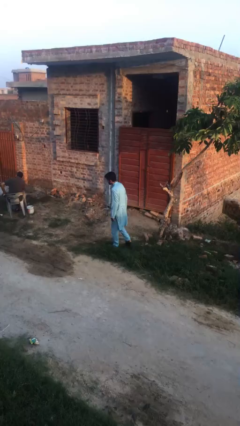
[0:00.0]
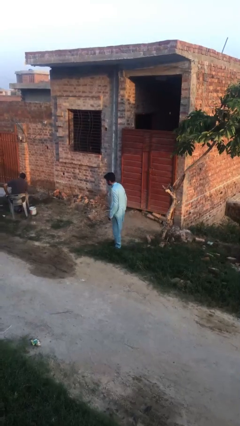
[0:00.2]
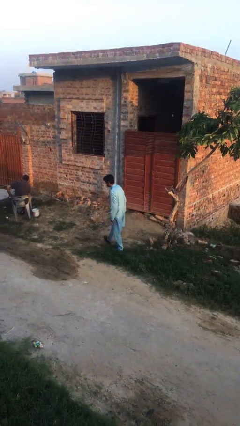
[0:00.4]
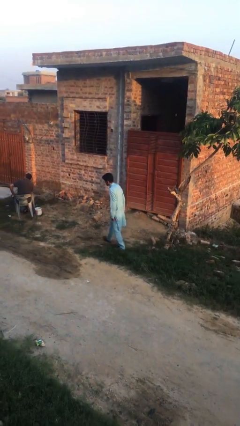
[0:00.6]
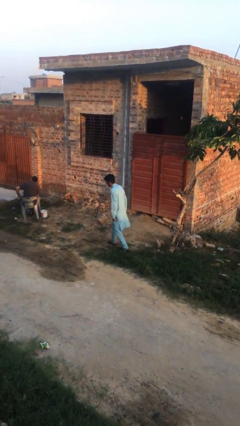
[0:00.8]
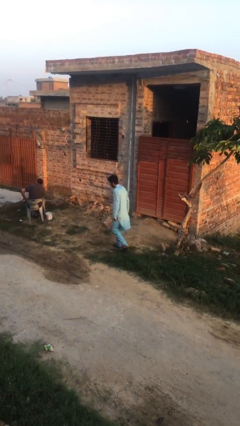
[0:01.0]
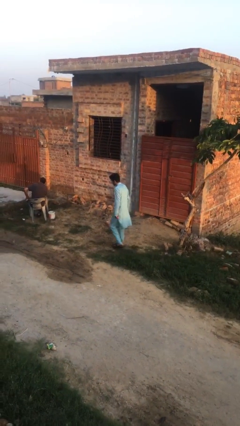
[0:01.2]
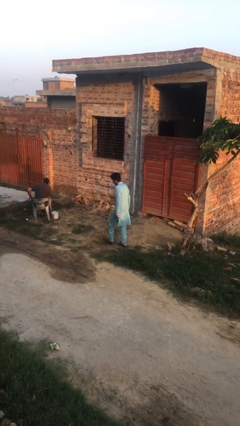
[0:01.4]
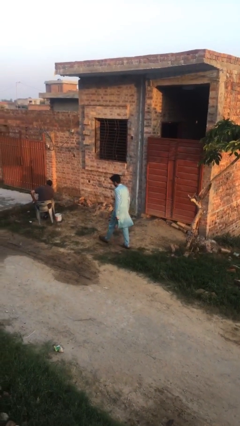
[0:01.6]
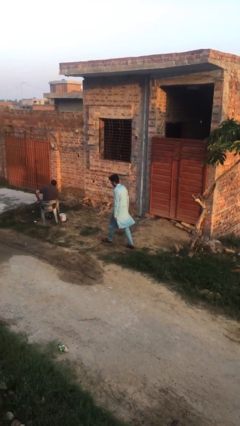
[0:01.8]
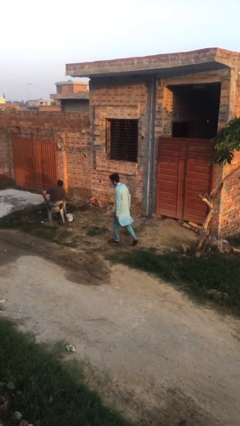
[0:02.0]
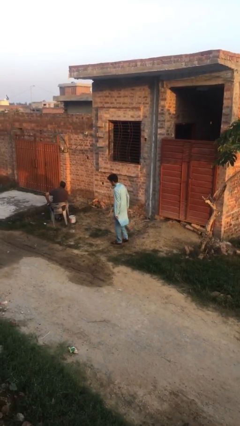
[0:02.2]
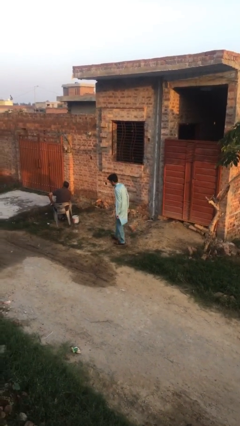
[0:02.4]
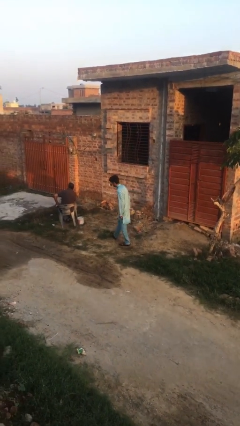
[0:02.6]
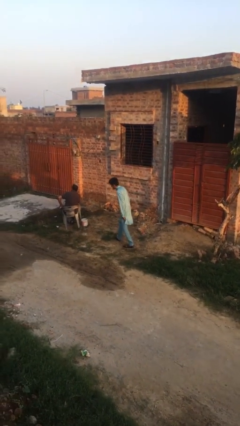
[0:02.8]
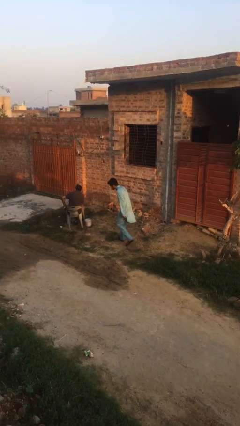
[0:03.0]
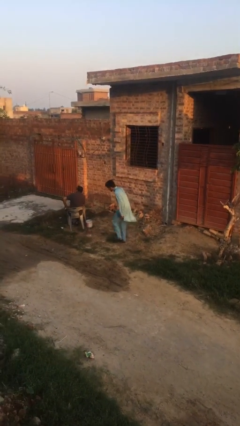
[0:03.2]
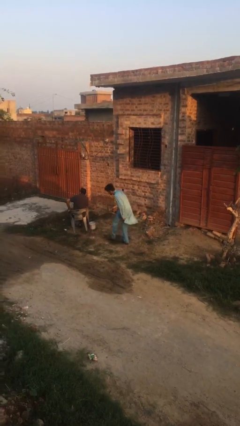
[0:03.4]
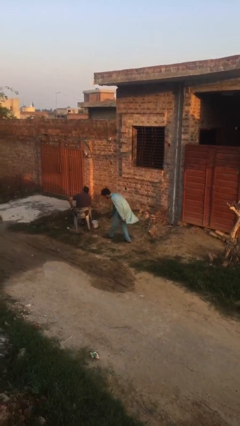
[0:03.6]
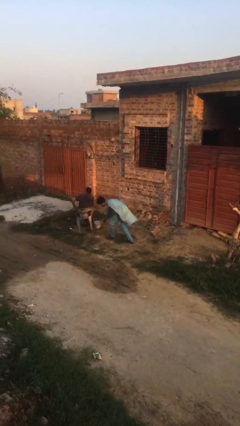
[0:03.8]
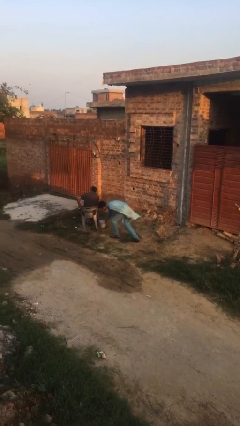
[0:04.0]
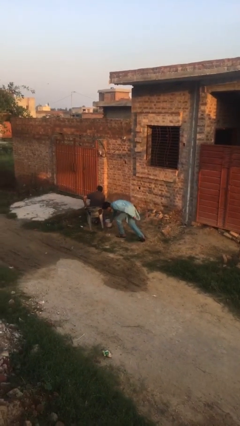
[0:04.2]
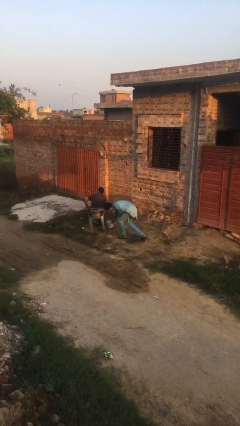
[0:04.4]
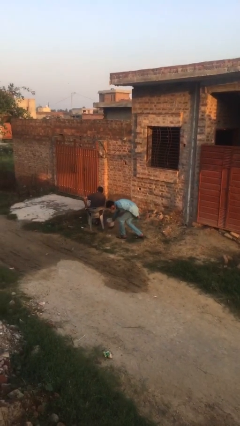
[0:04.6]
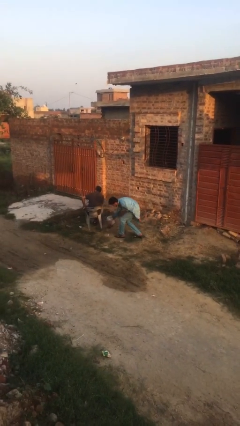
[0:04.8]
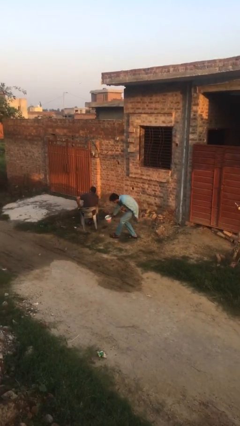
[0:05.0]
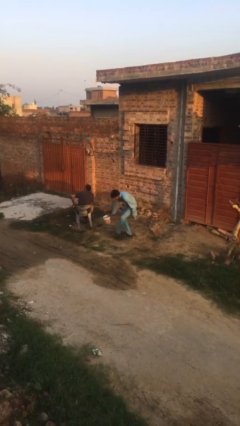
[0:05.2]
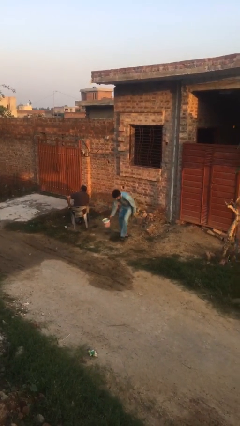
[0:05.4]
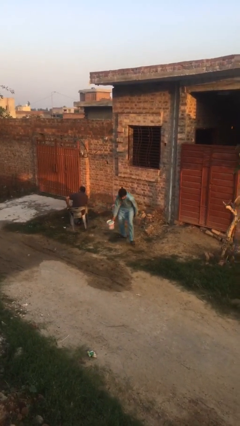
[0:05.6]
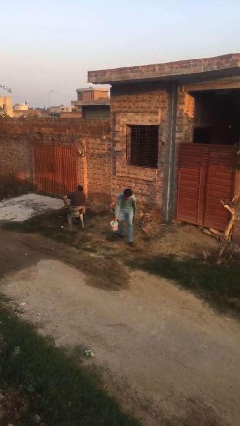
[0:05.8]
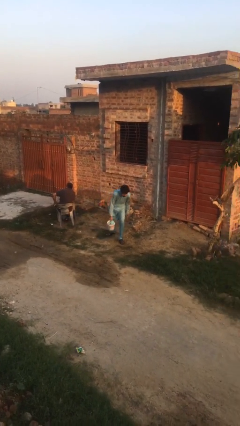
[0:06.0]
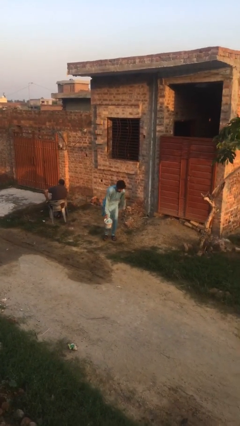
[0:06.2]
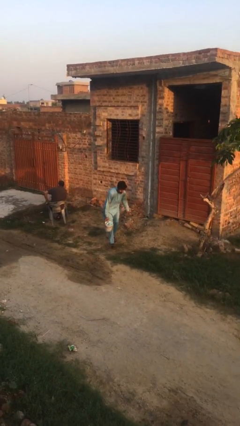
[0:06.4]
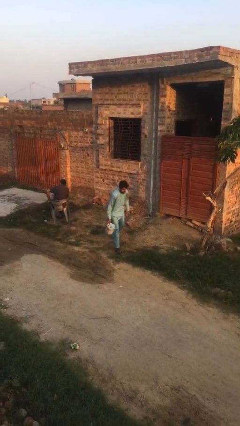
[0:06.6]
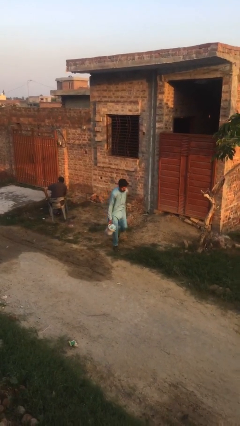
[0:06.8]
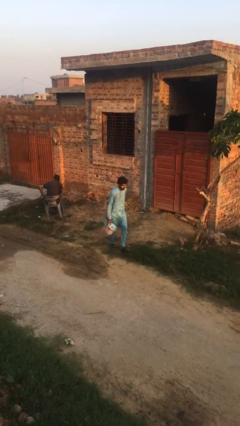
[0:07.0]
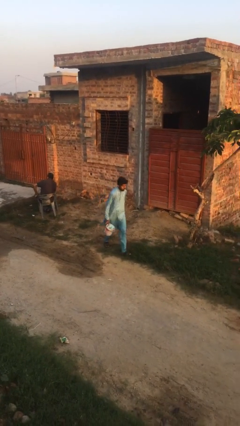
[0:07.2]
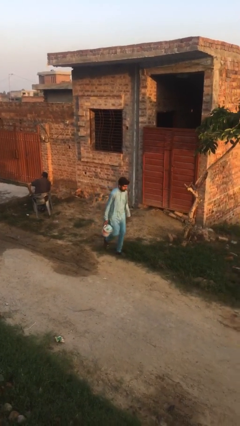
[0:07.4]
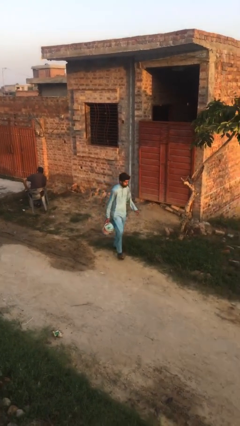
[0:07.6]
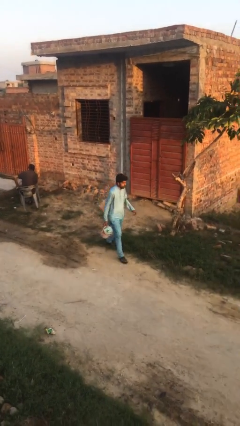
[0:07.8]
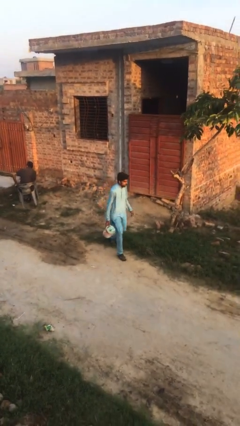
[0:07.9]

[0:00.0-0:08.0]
person steals object from person

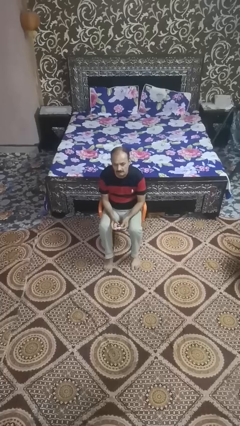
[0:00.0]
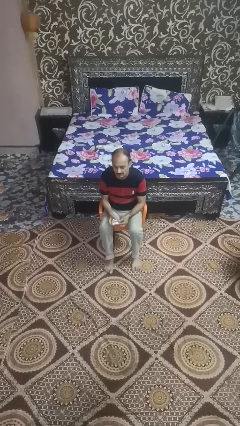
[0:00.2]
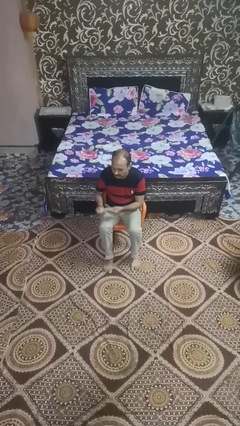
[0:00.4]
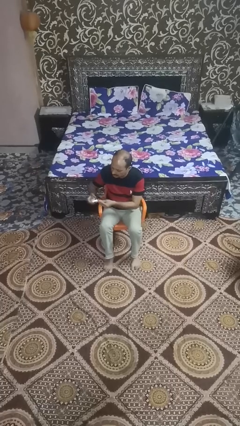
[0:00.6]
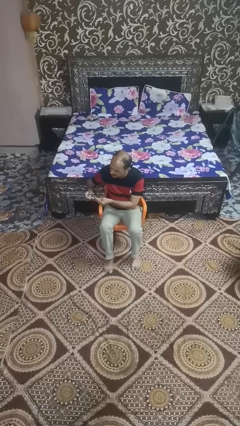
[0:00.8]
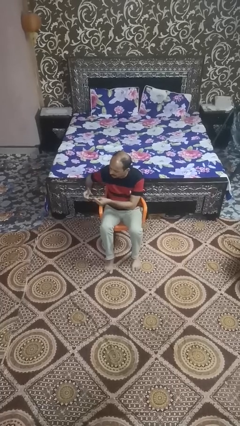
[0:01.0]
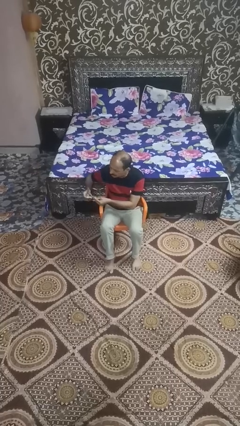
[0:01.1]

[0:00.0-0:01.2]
person clips fingernails

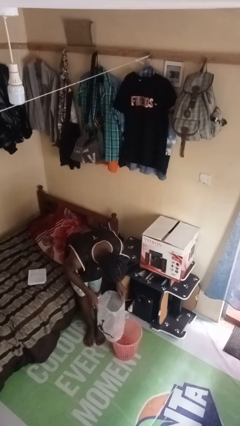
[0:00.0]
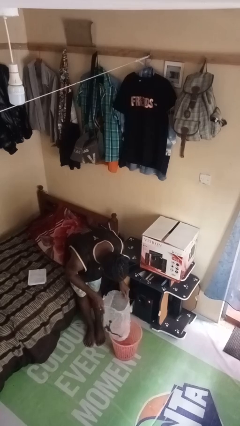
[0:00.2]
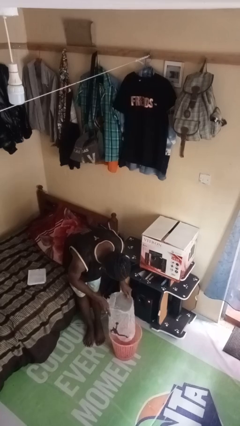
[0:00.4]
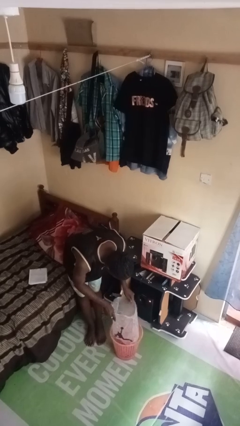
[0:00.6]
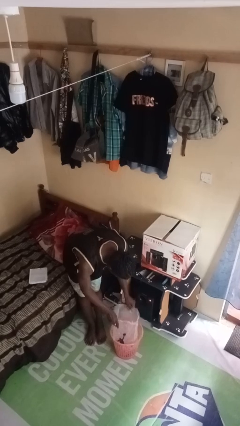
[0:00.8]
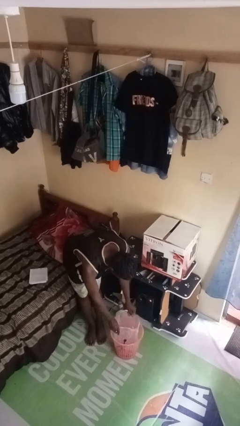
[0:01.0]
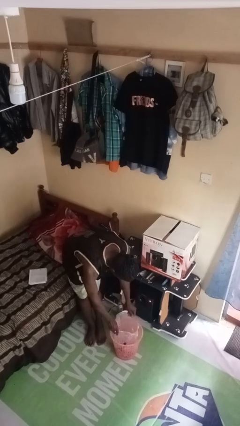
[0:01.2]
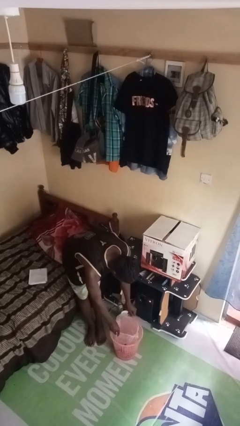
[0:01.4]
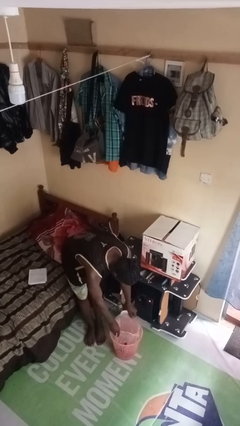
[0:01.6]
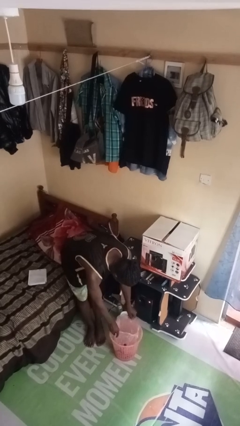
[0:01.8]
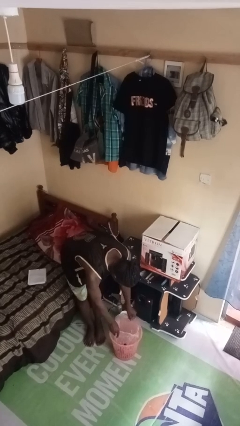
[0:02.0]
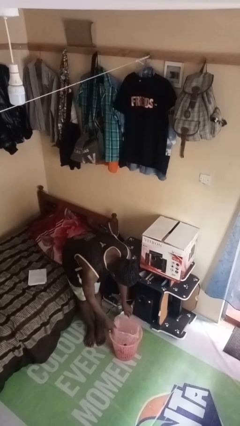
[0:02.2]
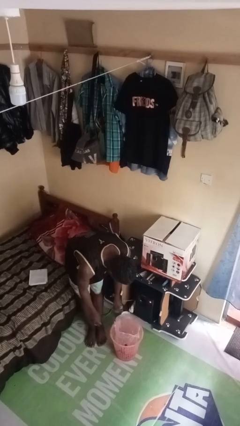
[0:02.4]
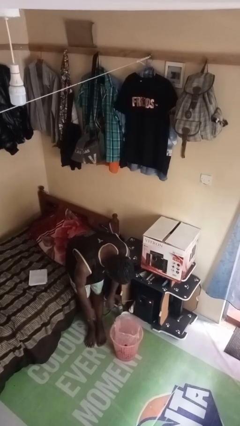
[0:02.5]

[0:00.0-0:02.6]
person inserts trashbag into trashcan

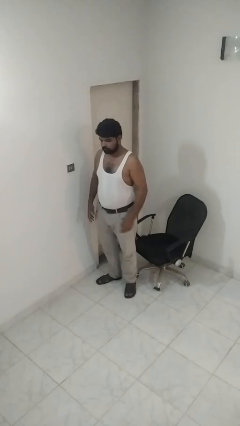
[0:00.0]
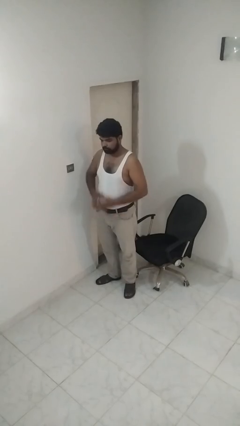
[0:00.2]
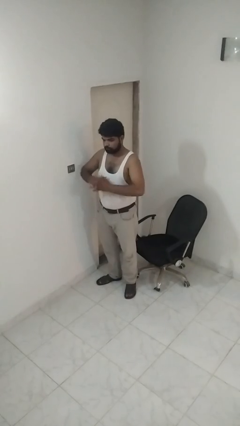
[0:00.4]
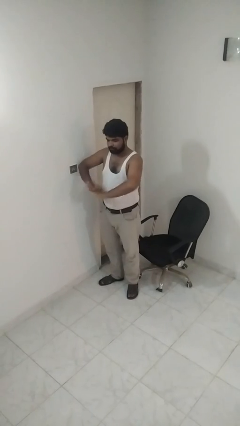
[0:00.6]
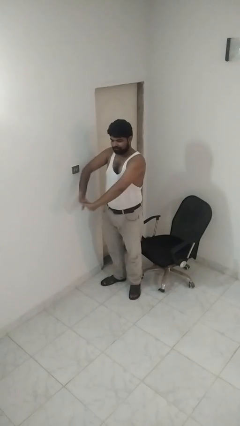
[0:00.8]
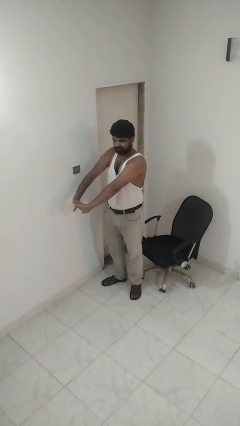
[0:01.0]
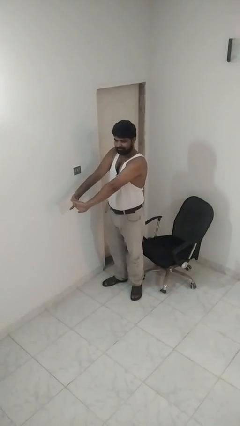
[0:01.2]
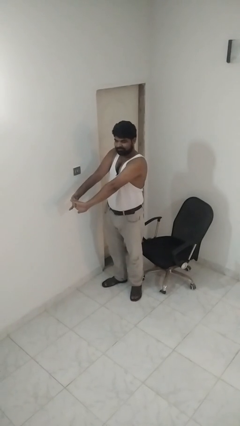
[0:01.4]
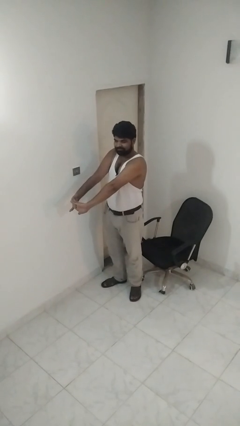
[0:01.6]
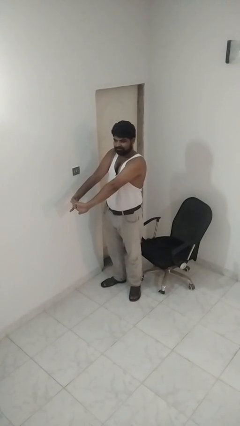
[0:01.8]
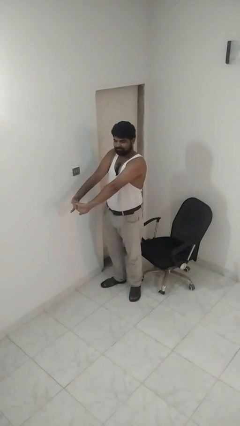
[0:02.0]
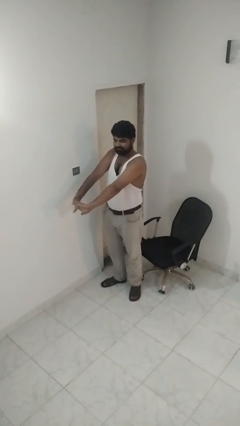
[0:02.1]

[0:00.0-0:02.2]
person cracks knuckles

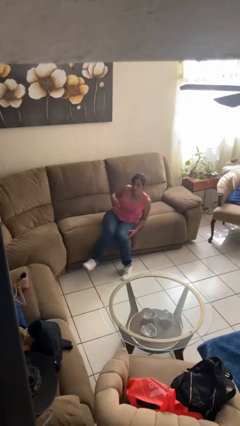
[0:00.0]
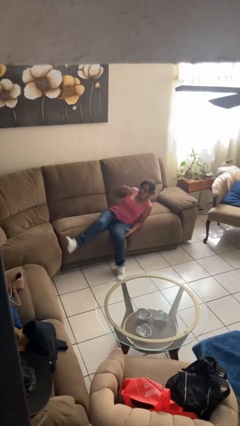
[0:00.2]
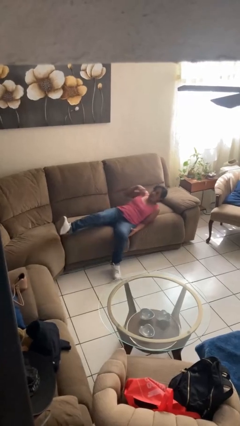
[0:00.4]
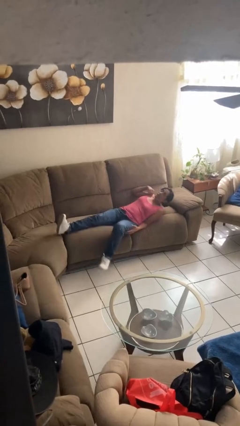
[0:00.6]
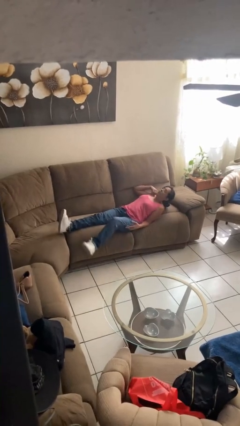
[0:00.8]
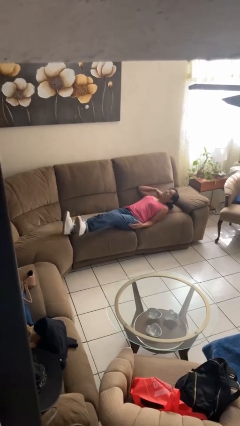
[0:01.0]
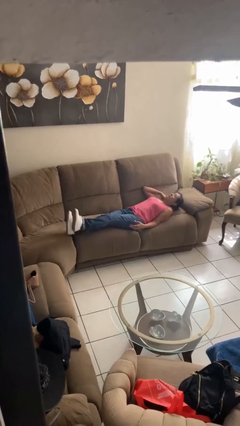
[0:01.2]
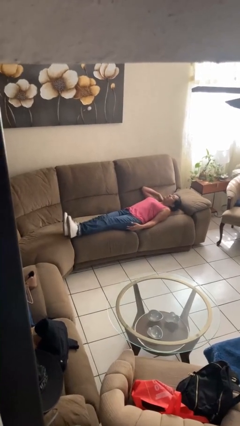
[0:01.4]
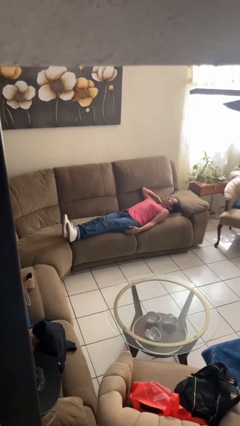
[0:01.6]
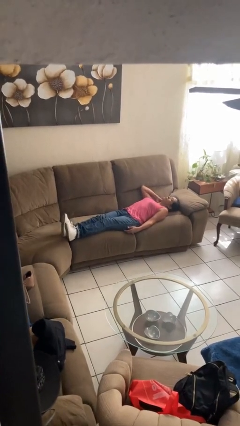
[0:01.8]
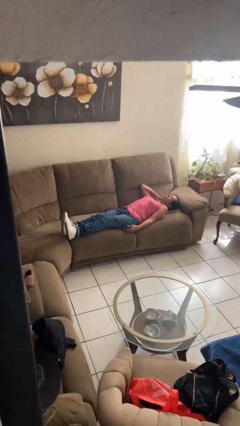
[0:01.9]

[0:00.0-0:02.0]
person lies down on couch

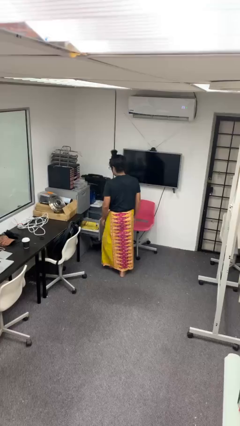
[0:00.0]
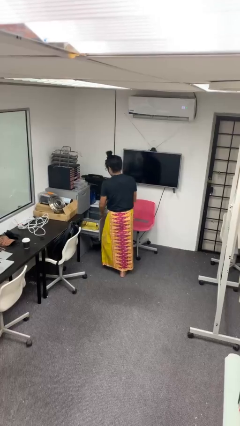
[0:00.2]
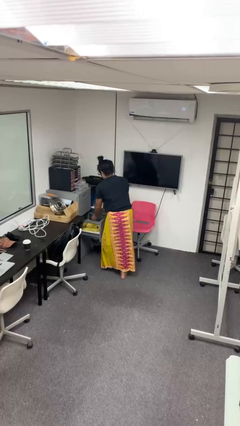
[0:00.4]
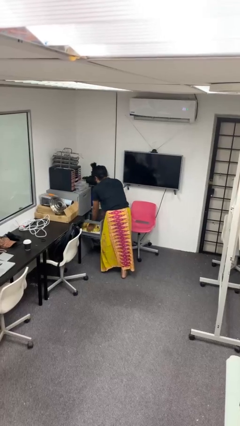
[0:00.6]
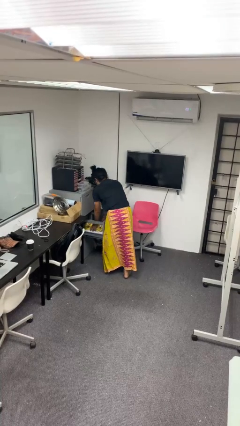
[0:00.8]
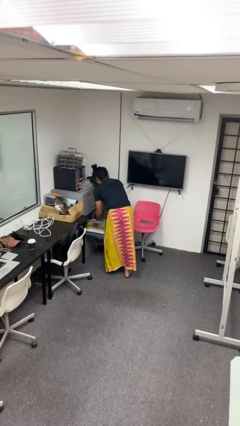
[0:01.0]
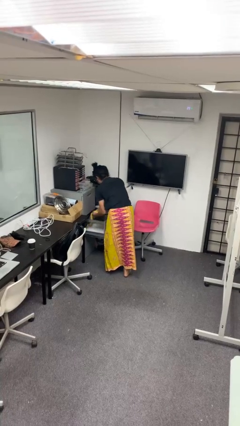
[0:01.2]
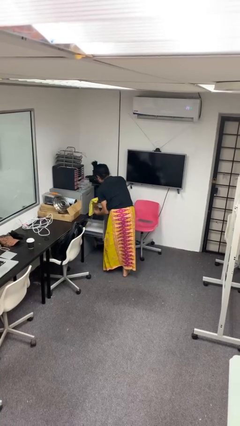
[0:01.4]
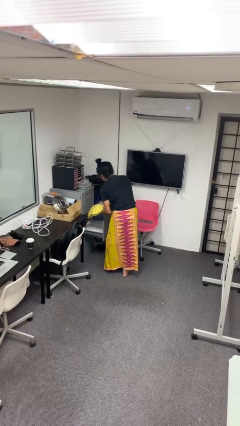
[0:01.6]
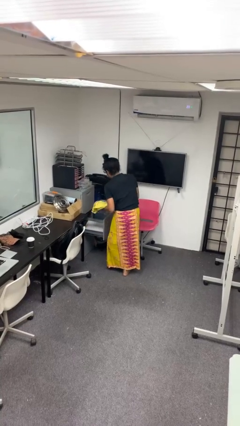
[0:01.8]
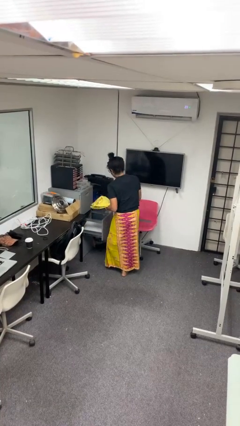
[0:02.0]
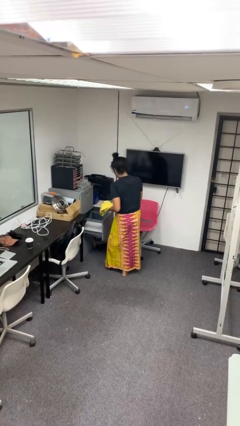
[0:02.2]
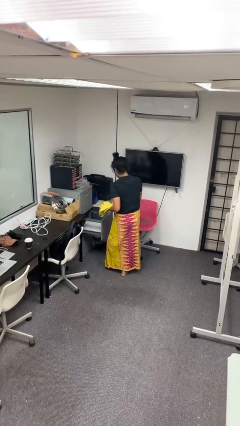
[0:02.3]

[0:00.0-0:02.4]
person takes clothes from dresser
